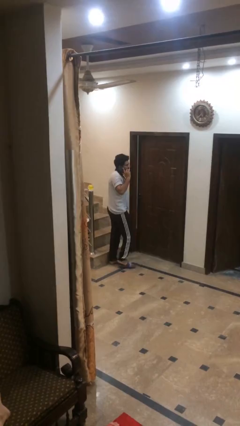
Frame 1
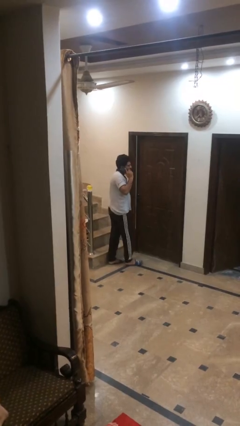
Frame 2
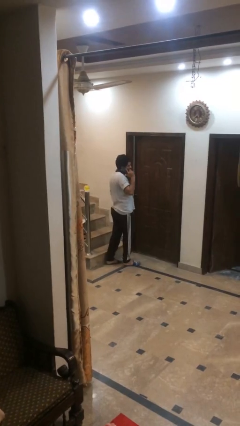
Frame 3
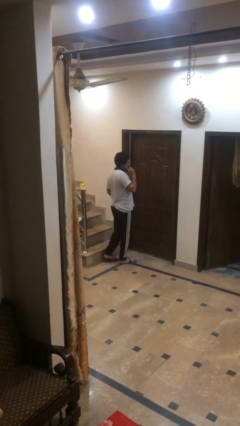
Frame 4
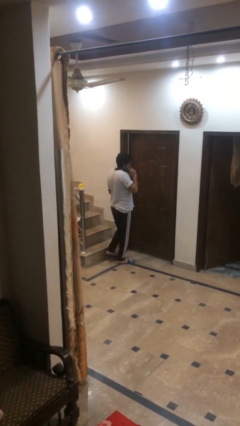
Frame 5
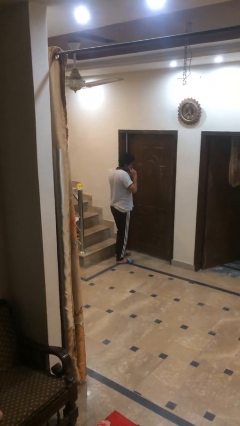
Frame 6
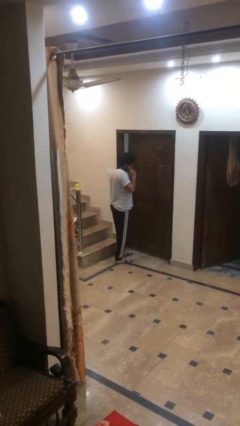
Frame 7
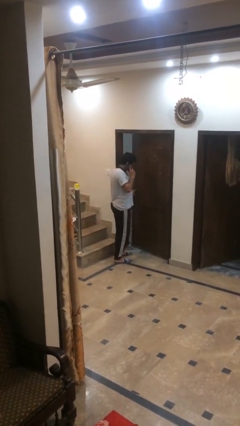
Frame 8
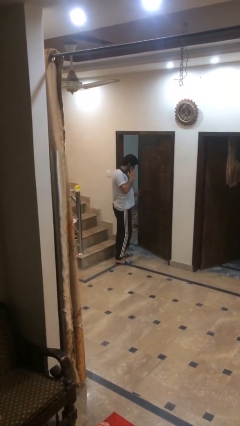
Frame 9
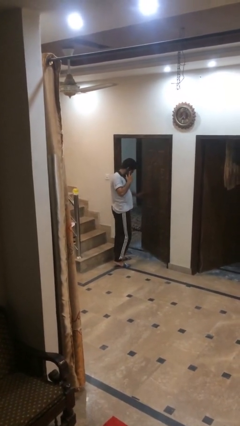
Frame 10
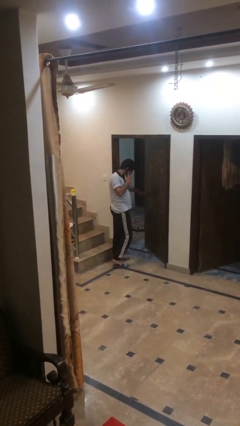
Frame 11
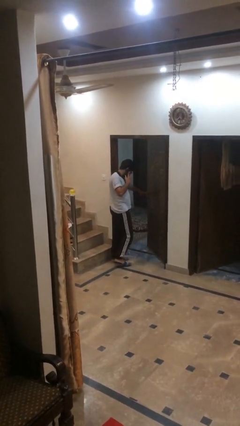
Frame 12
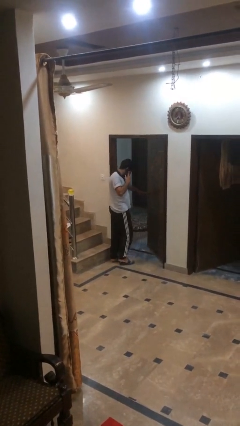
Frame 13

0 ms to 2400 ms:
person opens facility door

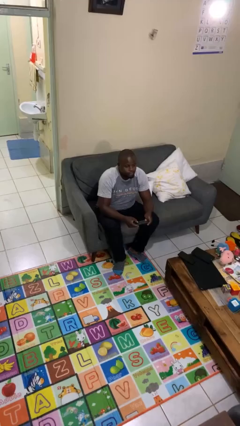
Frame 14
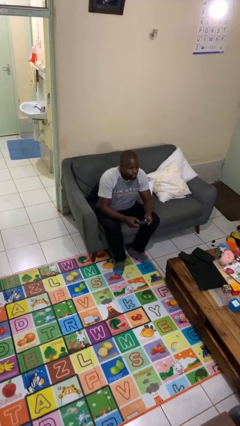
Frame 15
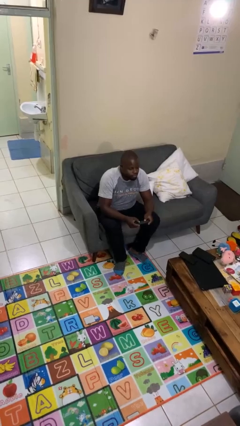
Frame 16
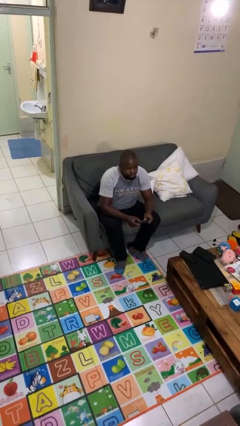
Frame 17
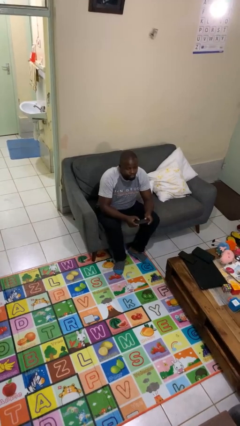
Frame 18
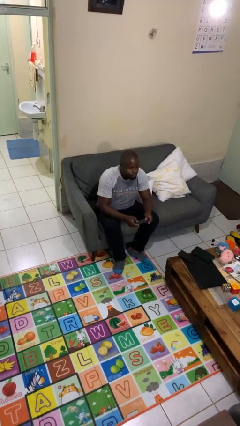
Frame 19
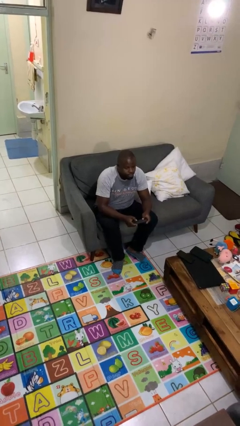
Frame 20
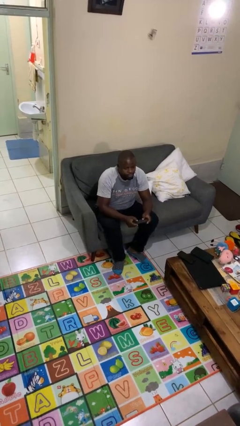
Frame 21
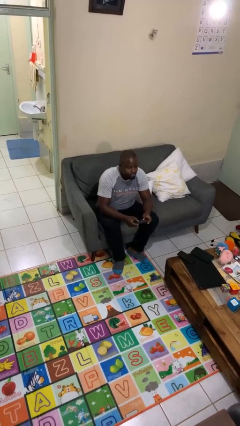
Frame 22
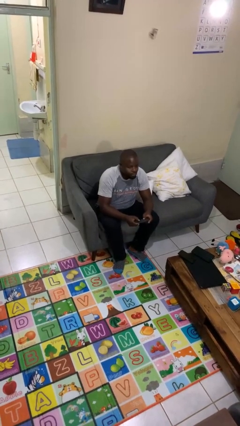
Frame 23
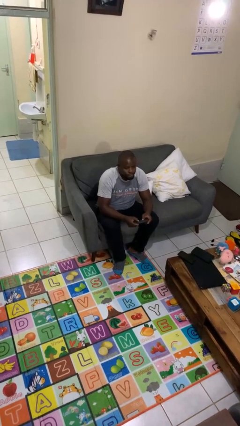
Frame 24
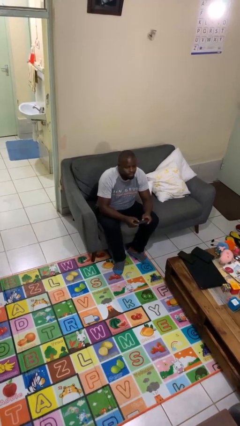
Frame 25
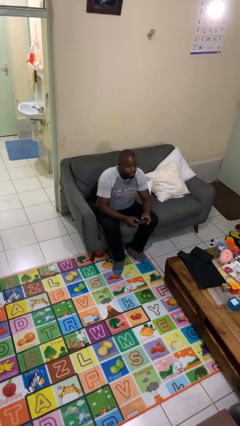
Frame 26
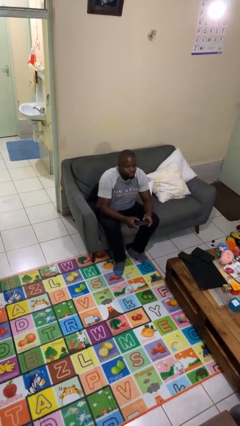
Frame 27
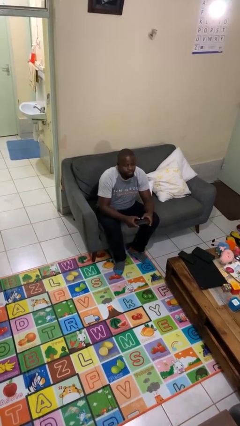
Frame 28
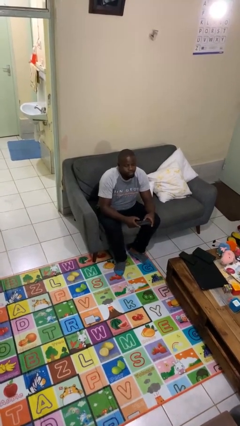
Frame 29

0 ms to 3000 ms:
person interacts with handheld game

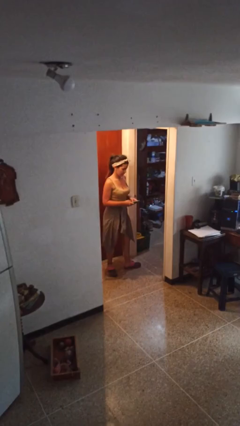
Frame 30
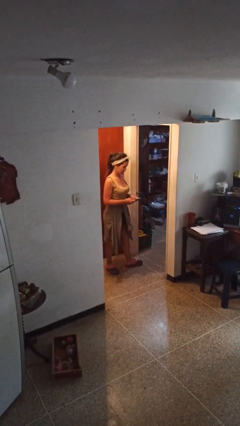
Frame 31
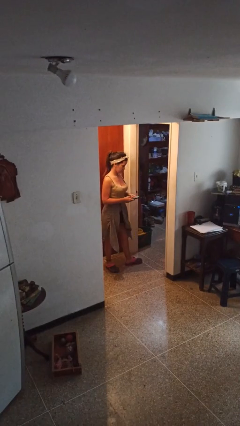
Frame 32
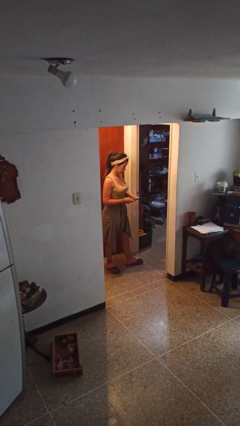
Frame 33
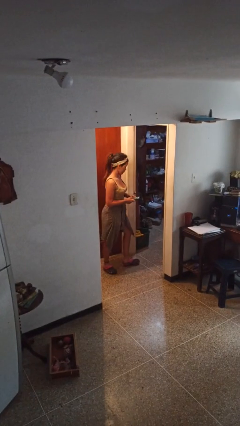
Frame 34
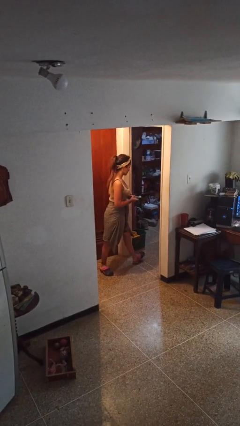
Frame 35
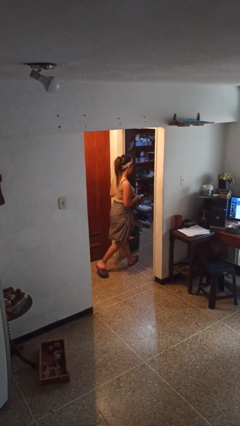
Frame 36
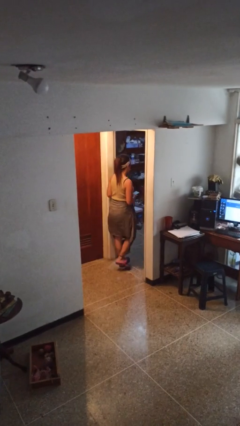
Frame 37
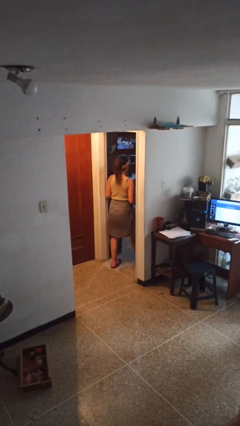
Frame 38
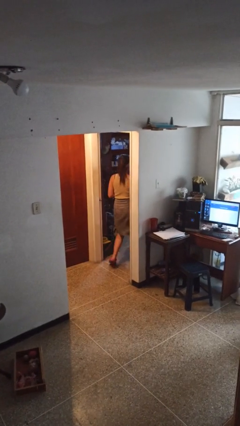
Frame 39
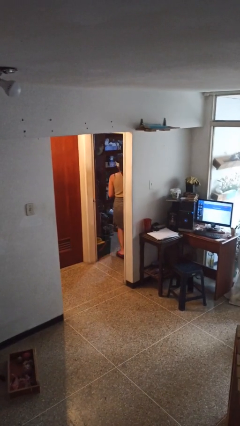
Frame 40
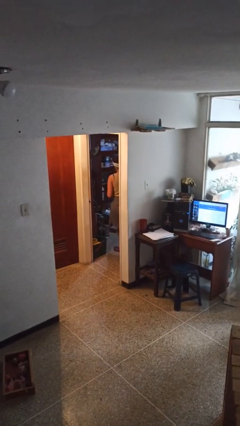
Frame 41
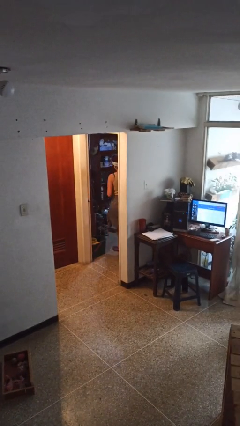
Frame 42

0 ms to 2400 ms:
person exits scene through structure

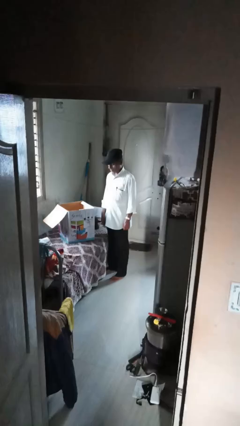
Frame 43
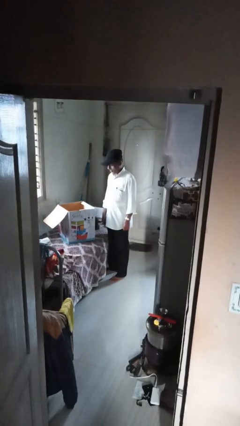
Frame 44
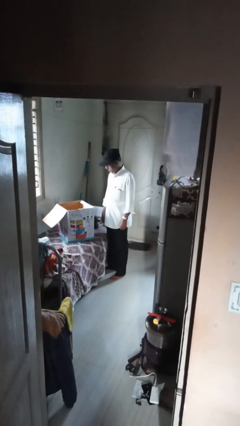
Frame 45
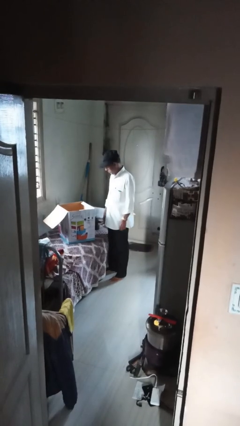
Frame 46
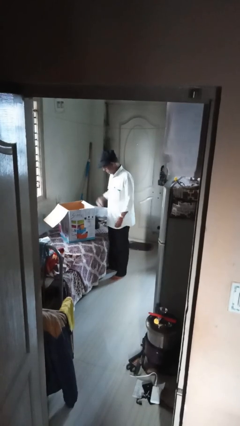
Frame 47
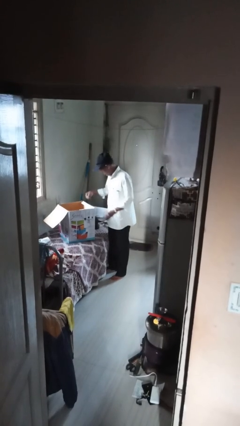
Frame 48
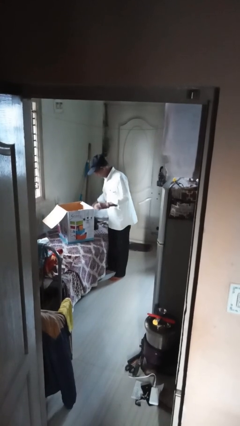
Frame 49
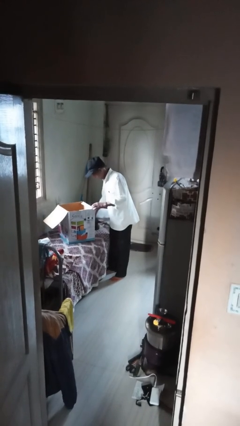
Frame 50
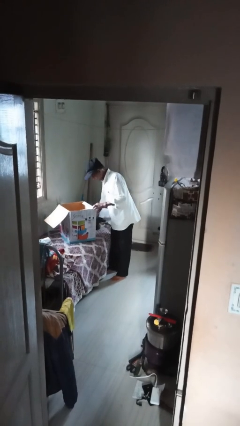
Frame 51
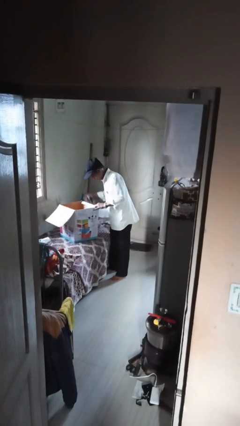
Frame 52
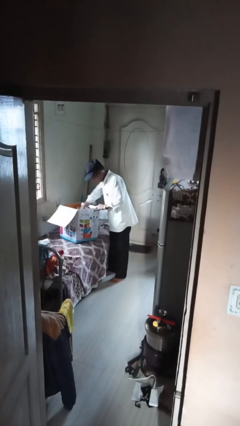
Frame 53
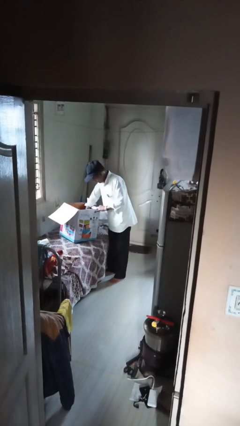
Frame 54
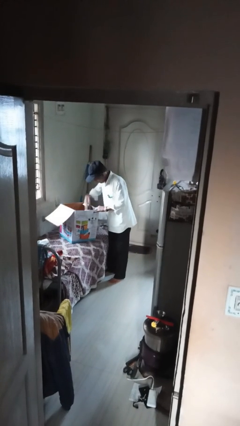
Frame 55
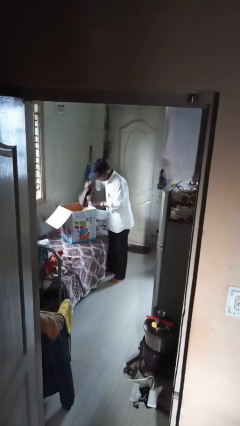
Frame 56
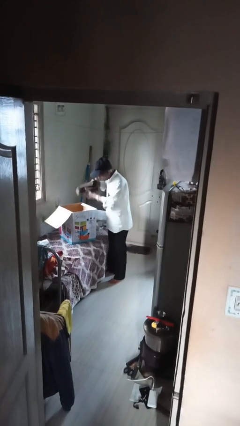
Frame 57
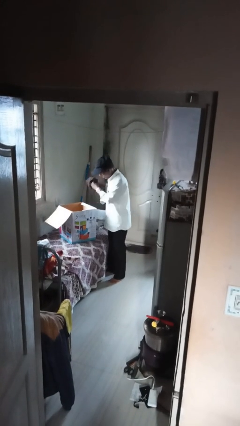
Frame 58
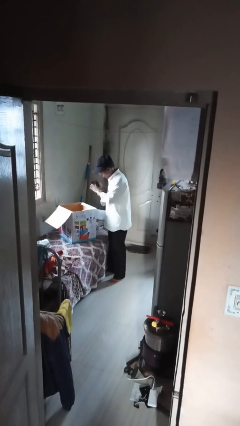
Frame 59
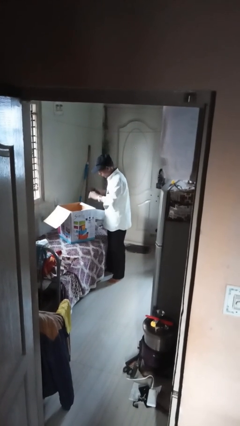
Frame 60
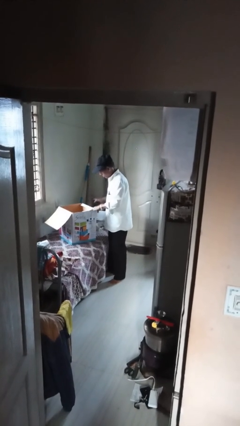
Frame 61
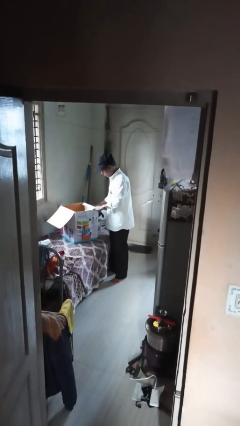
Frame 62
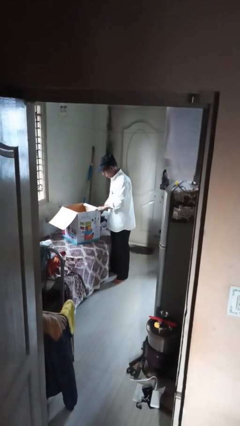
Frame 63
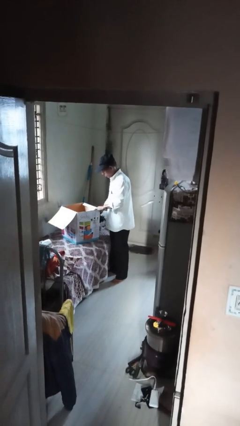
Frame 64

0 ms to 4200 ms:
person takes object from box

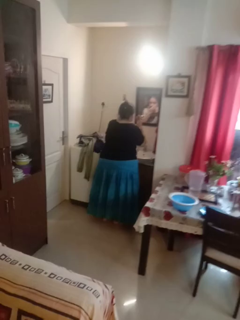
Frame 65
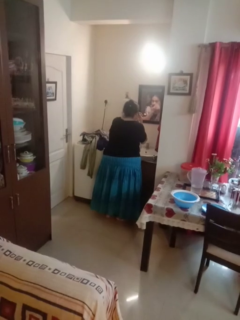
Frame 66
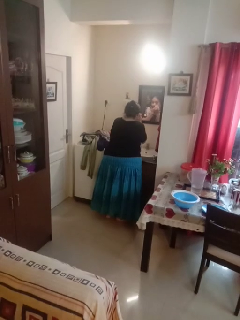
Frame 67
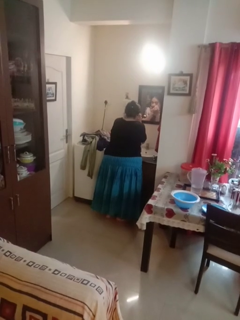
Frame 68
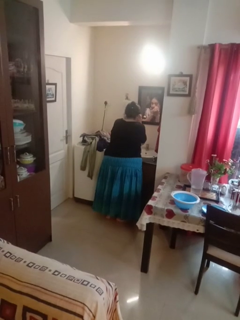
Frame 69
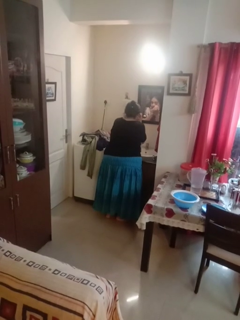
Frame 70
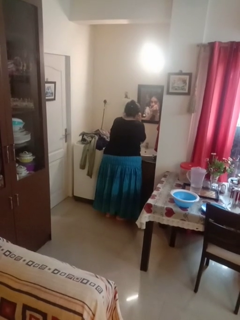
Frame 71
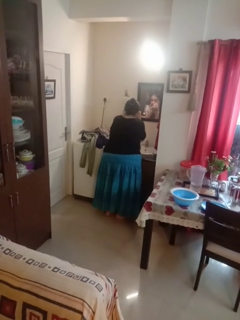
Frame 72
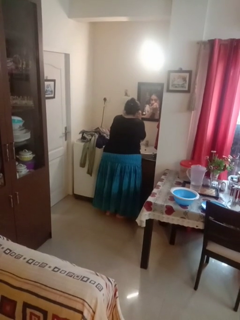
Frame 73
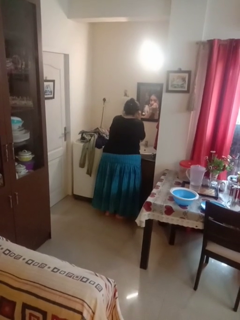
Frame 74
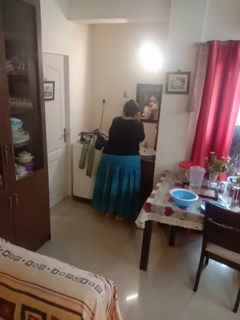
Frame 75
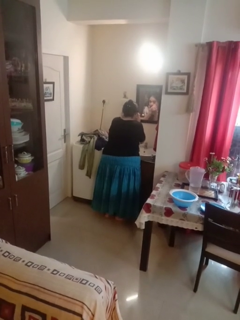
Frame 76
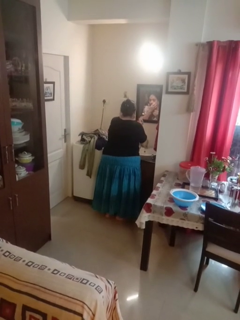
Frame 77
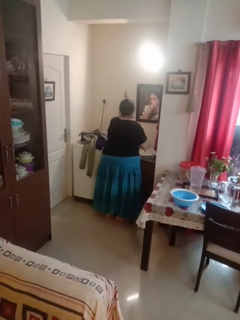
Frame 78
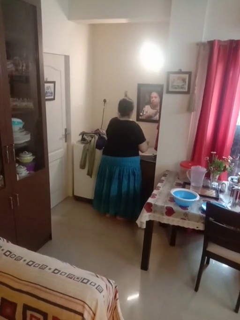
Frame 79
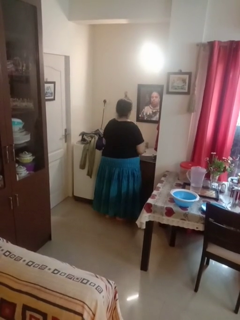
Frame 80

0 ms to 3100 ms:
person applies eye makeup

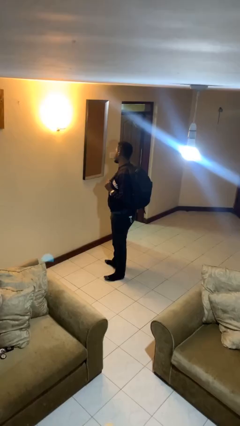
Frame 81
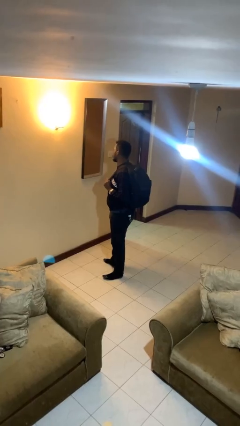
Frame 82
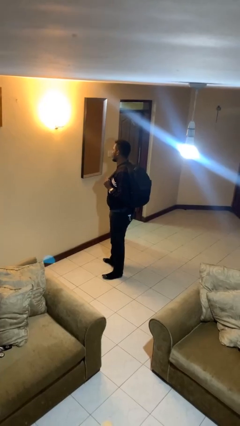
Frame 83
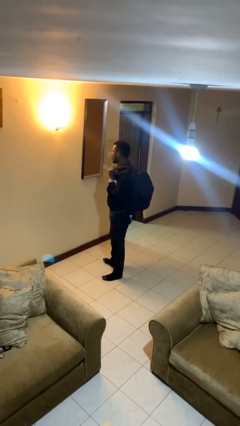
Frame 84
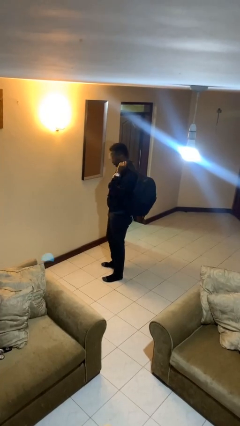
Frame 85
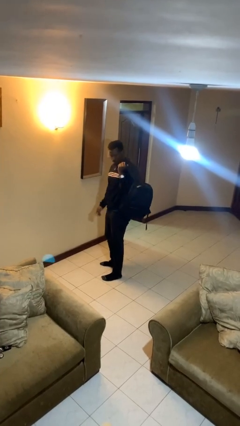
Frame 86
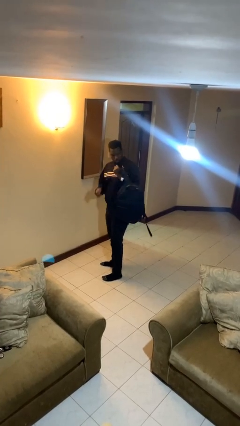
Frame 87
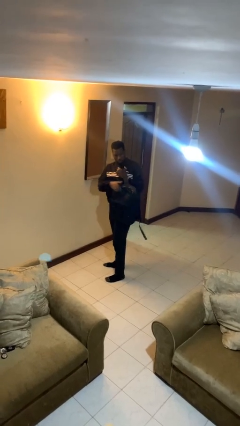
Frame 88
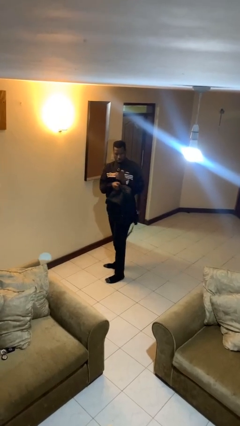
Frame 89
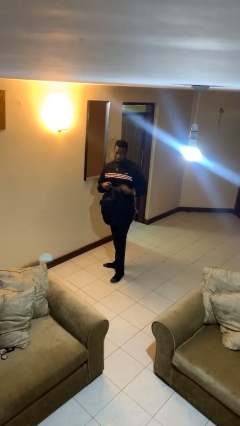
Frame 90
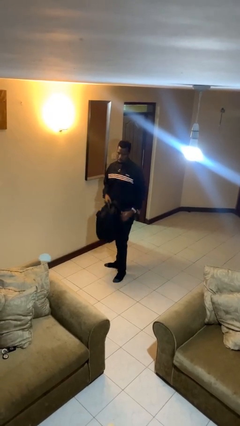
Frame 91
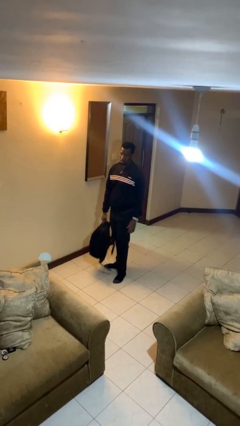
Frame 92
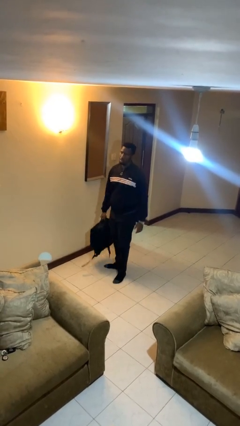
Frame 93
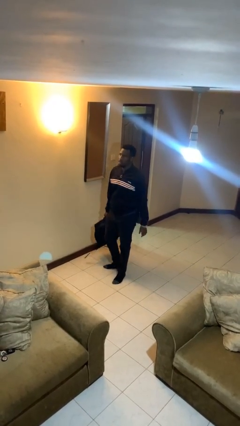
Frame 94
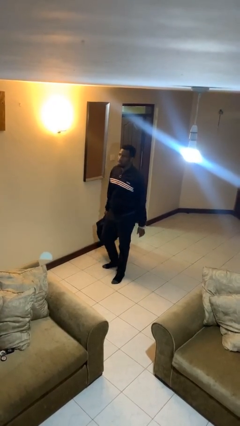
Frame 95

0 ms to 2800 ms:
person takes off backpack

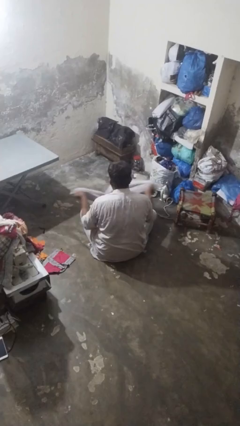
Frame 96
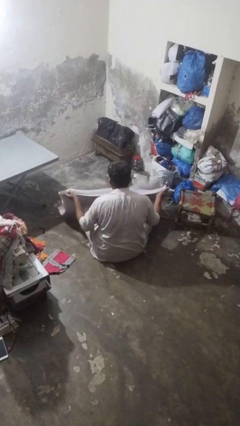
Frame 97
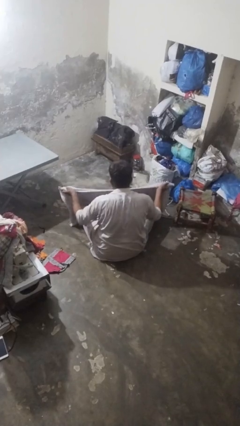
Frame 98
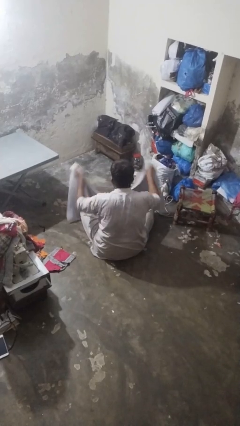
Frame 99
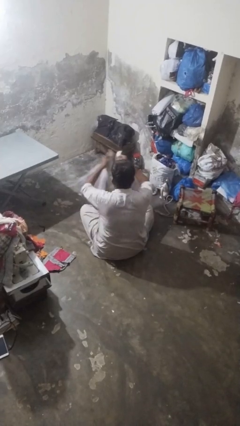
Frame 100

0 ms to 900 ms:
person folds towel
